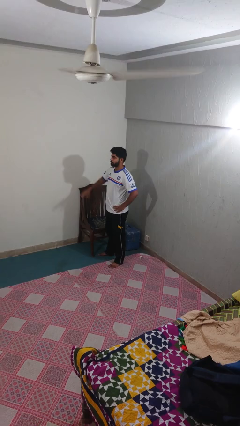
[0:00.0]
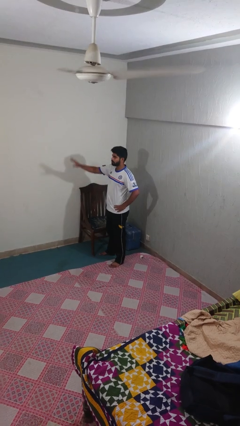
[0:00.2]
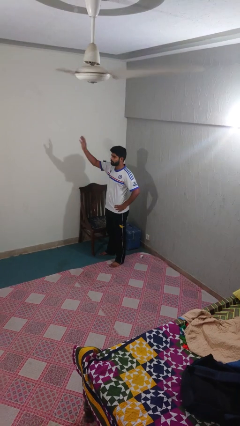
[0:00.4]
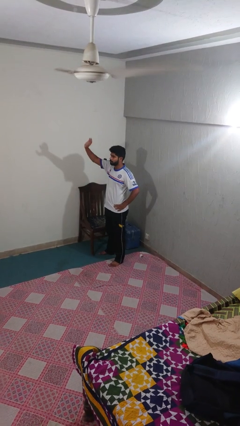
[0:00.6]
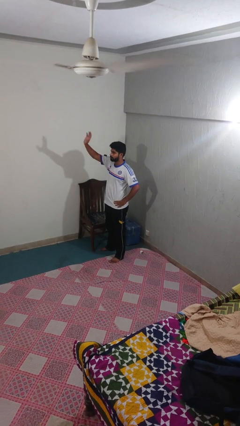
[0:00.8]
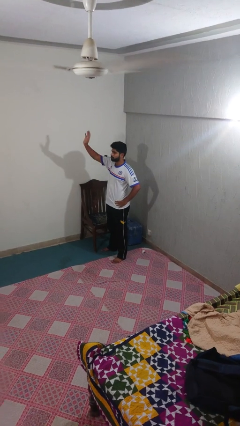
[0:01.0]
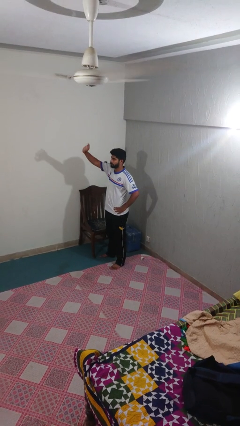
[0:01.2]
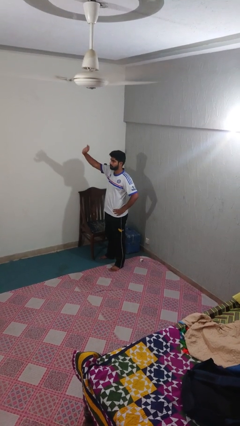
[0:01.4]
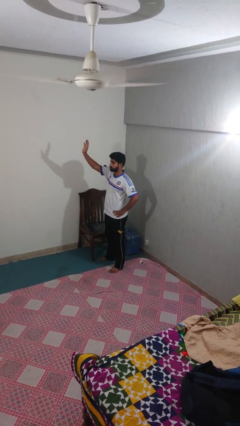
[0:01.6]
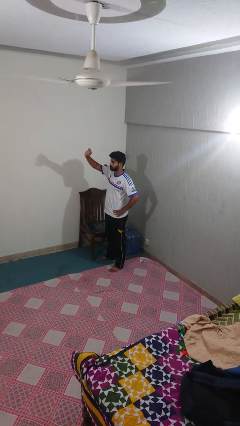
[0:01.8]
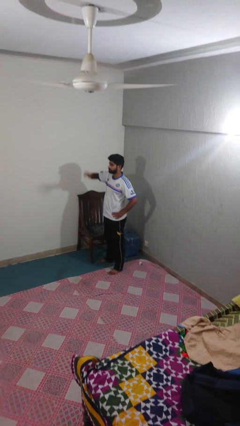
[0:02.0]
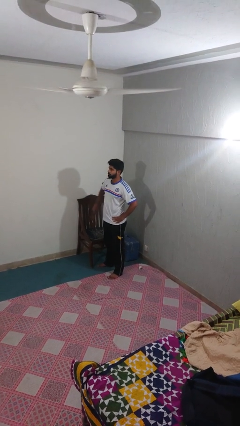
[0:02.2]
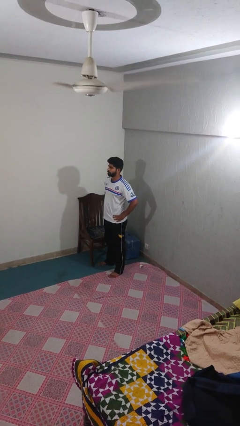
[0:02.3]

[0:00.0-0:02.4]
person waves at person

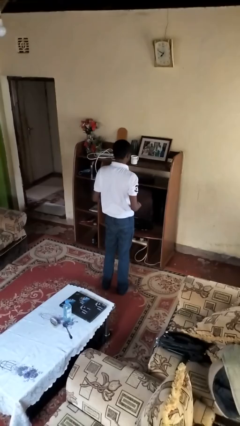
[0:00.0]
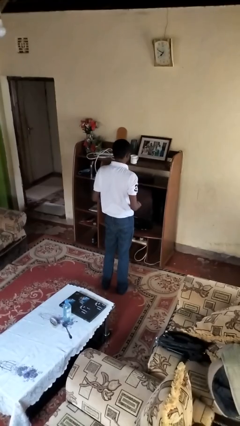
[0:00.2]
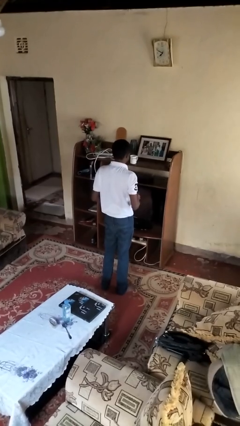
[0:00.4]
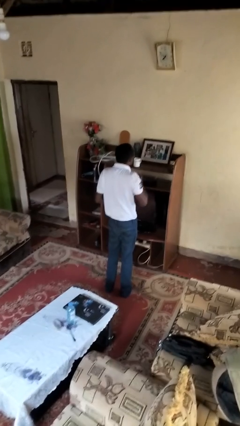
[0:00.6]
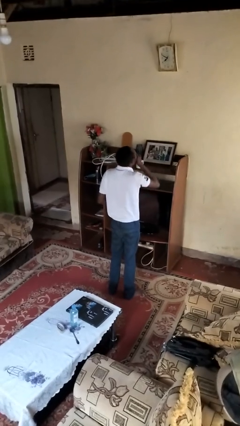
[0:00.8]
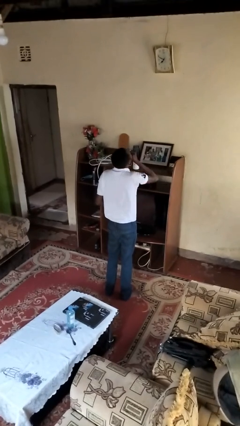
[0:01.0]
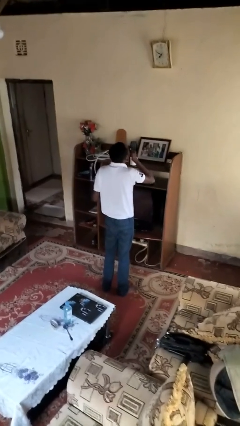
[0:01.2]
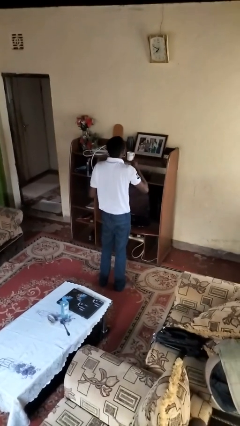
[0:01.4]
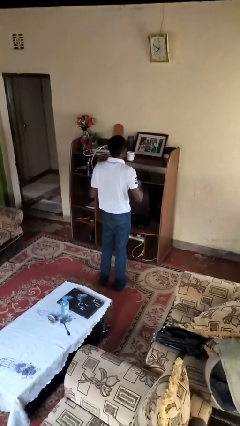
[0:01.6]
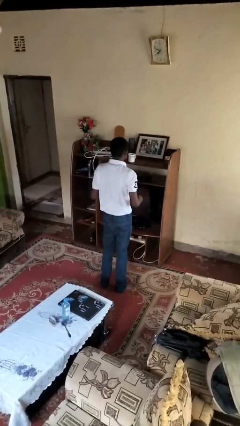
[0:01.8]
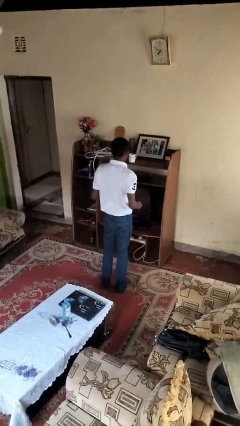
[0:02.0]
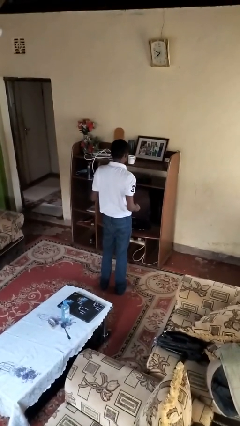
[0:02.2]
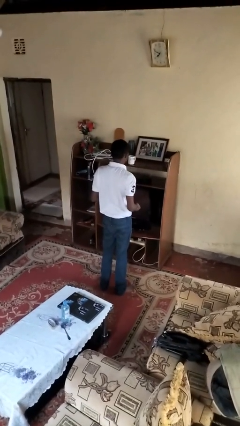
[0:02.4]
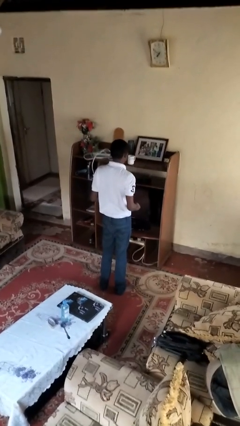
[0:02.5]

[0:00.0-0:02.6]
person takes medicine pills

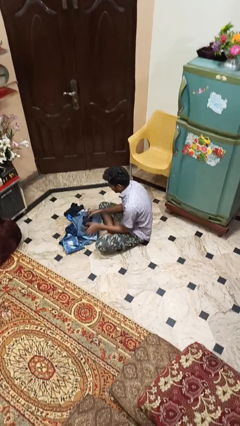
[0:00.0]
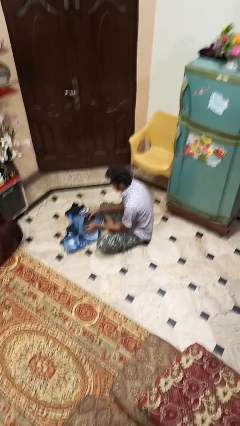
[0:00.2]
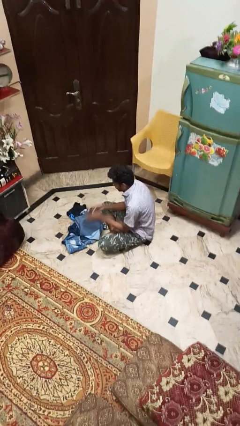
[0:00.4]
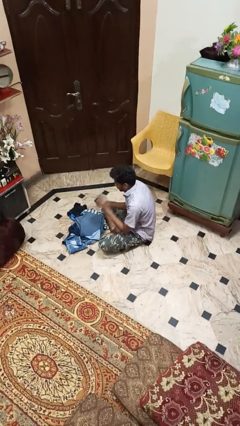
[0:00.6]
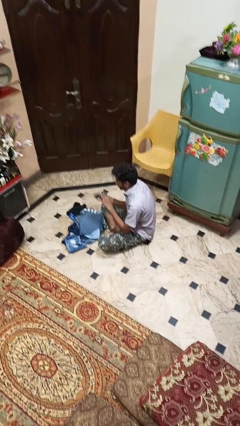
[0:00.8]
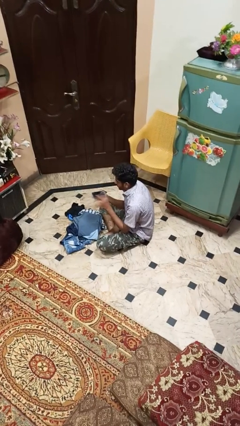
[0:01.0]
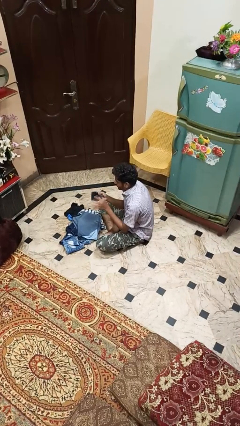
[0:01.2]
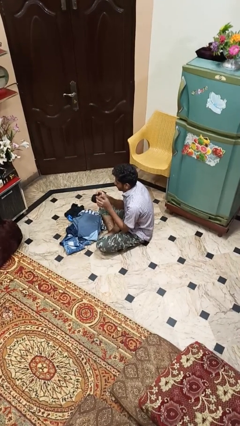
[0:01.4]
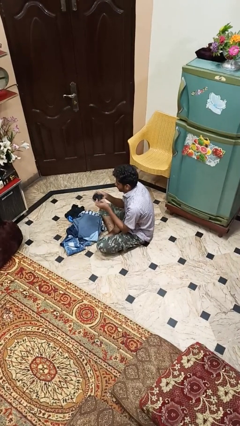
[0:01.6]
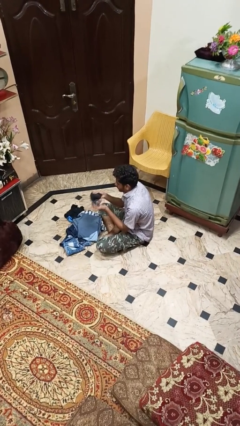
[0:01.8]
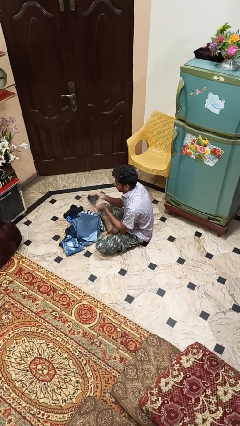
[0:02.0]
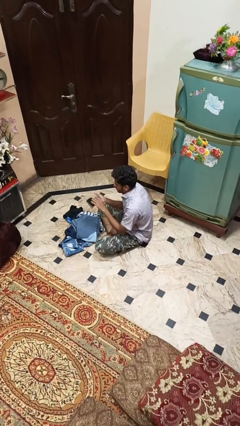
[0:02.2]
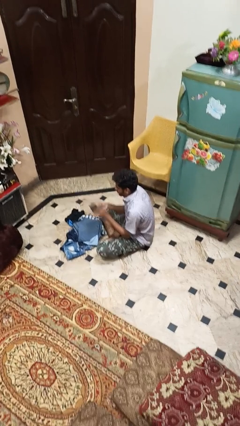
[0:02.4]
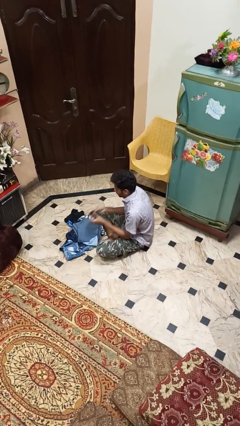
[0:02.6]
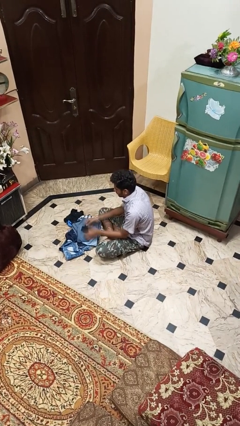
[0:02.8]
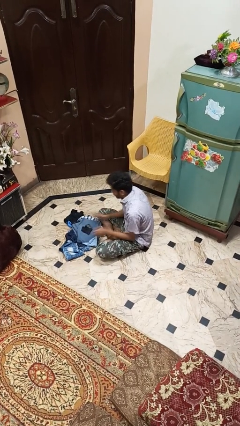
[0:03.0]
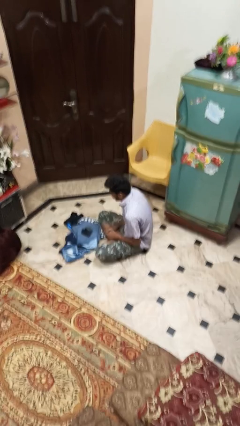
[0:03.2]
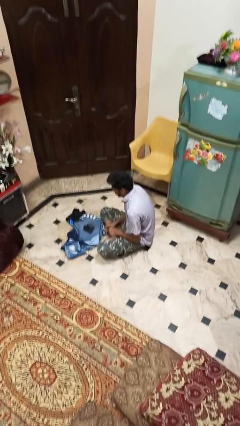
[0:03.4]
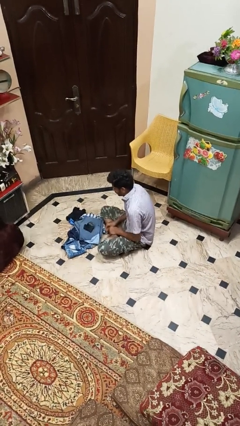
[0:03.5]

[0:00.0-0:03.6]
person folds socks

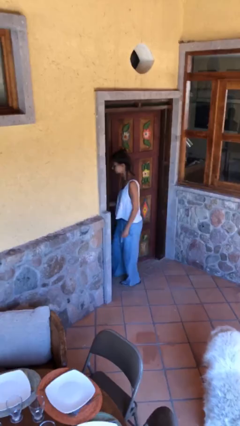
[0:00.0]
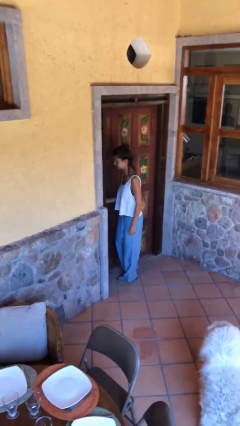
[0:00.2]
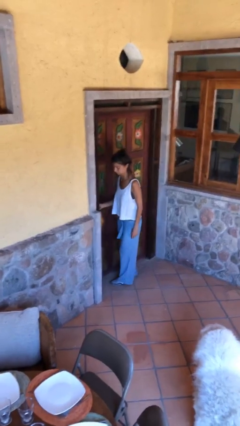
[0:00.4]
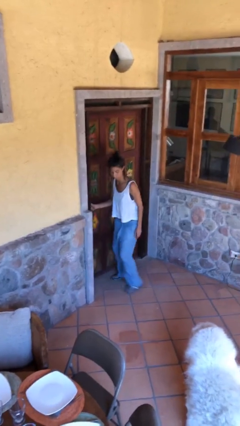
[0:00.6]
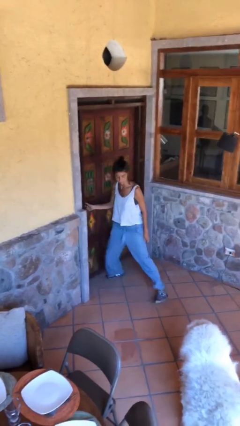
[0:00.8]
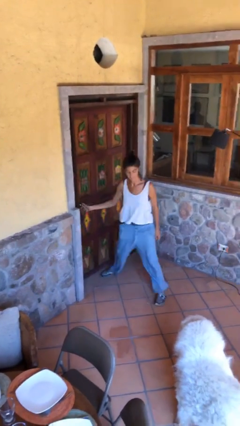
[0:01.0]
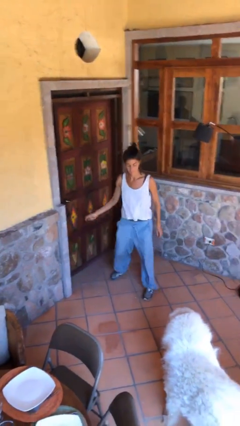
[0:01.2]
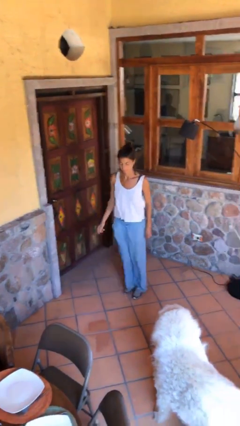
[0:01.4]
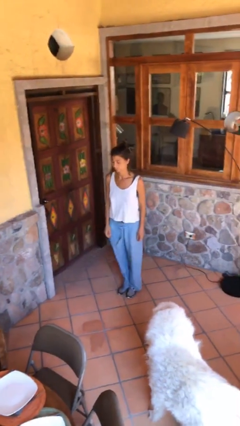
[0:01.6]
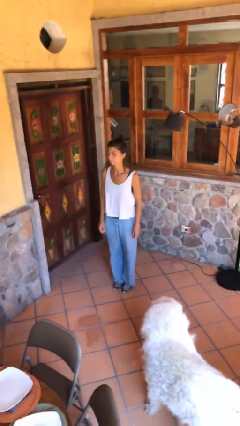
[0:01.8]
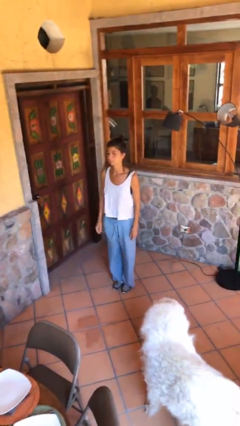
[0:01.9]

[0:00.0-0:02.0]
person closes facility door

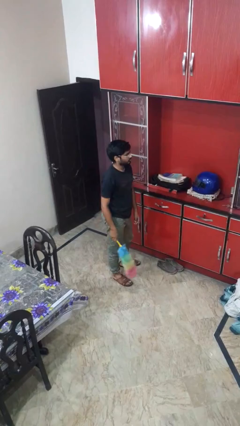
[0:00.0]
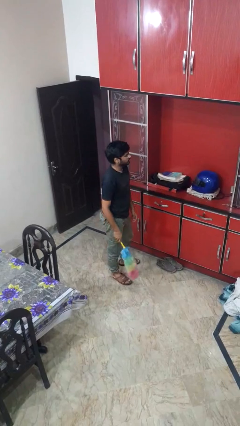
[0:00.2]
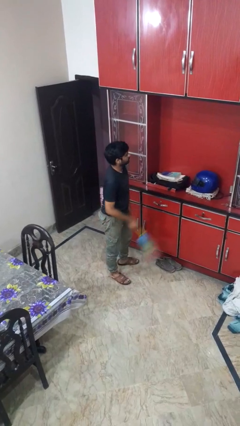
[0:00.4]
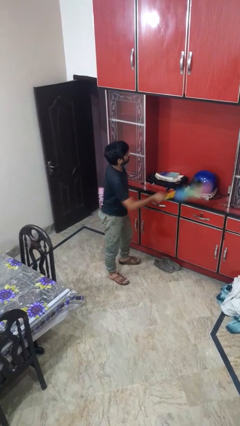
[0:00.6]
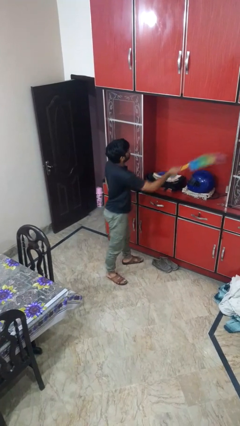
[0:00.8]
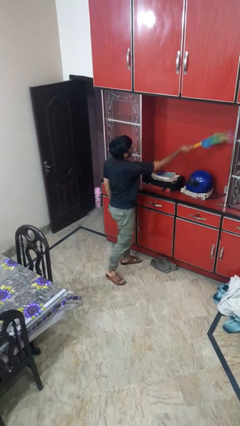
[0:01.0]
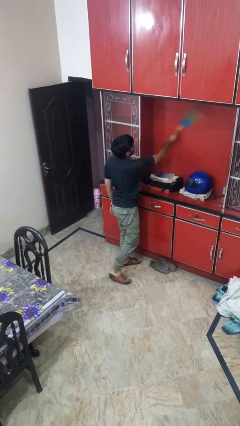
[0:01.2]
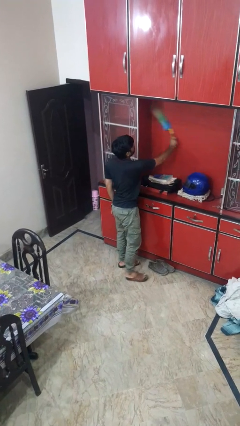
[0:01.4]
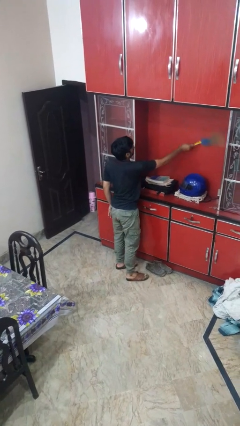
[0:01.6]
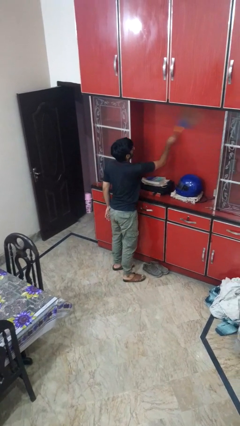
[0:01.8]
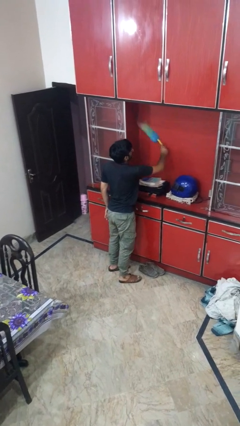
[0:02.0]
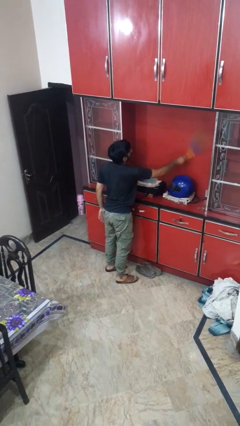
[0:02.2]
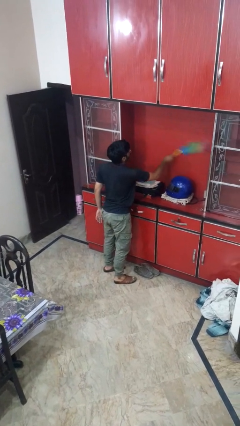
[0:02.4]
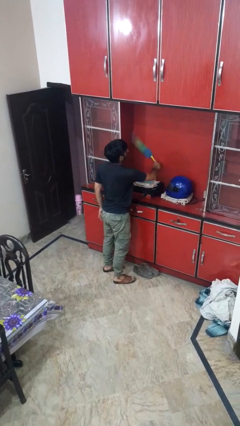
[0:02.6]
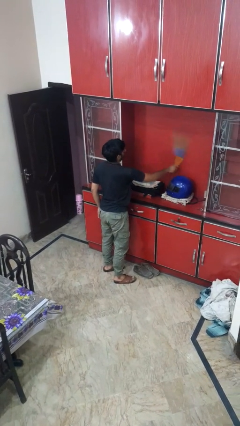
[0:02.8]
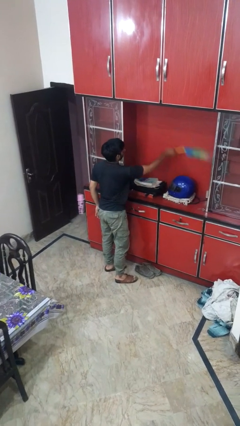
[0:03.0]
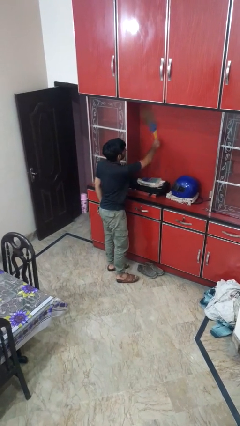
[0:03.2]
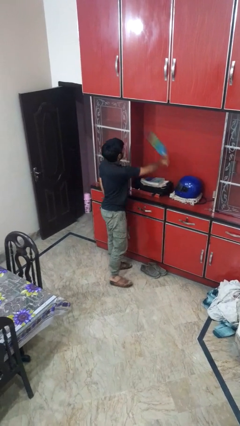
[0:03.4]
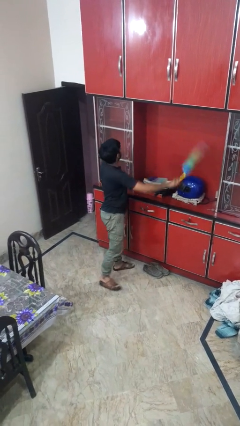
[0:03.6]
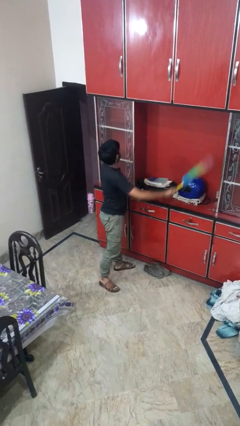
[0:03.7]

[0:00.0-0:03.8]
person dusts furniture

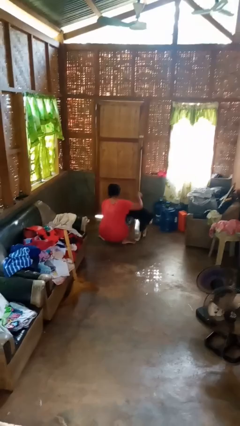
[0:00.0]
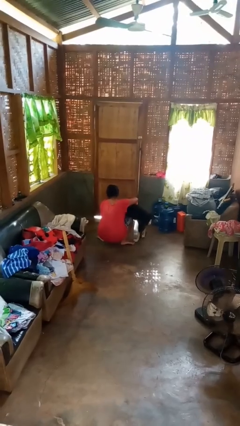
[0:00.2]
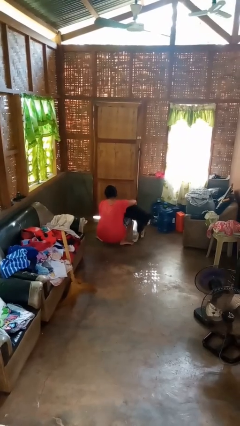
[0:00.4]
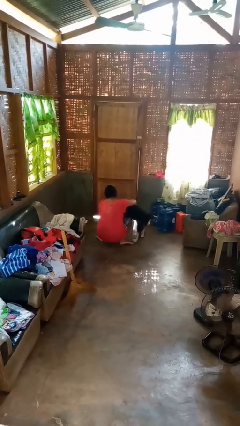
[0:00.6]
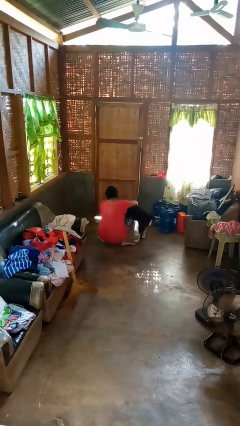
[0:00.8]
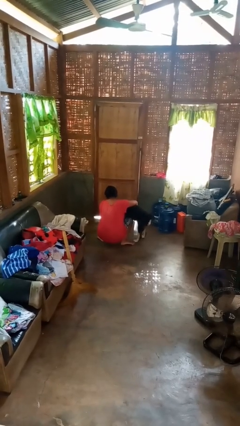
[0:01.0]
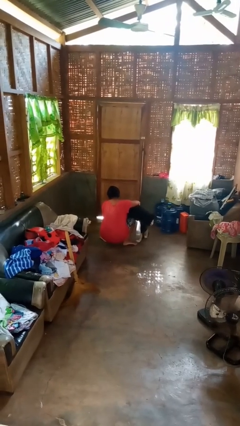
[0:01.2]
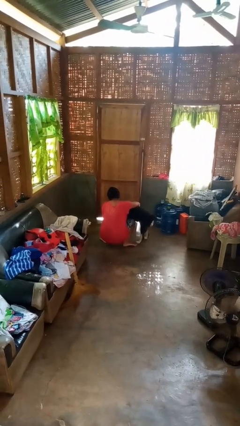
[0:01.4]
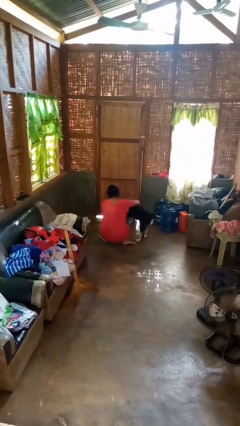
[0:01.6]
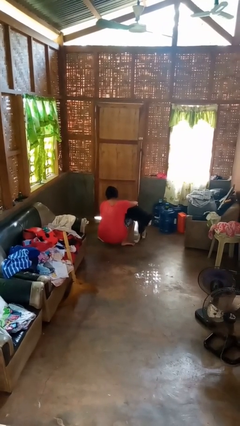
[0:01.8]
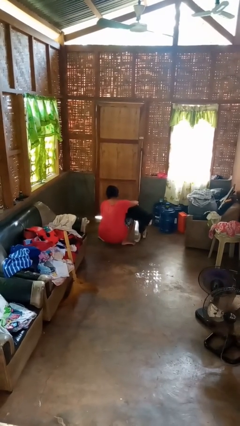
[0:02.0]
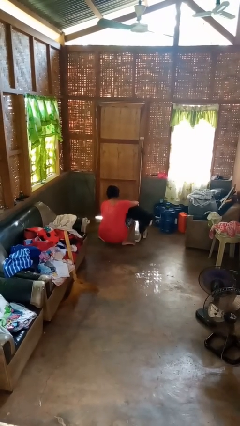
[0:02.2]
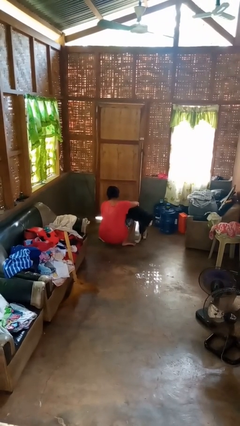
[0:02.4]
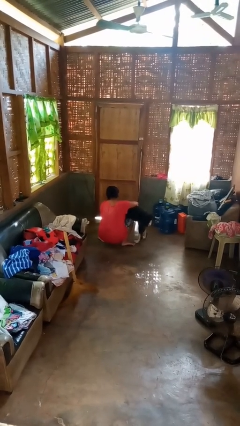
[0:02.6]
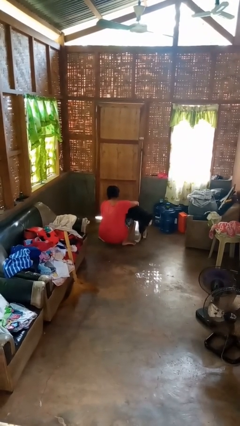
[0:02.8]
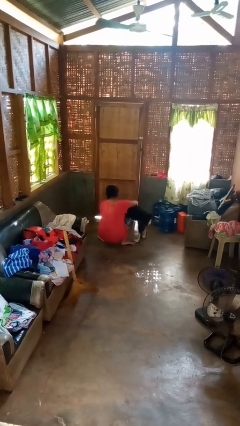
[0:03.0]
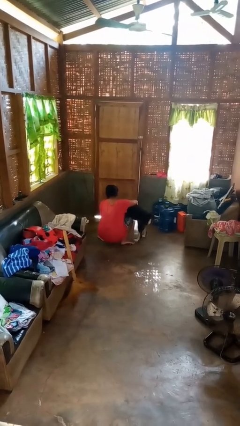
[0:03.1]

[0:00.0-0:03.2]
person hugs dog
